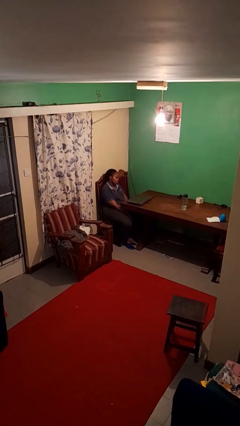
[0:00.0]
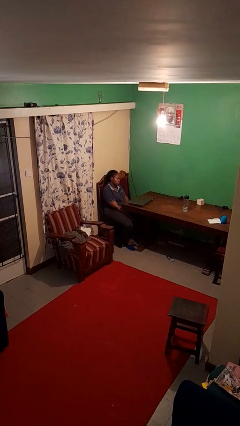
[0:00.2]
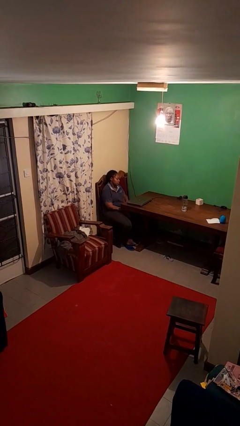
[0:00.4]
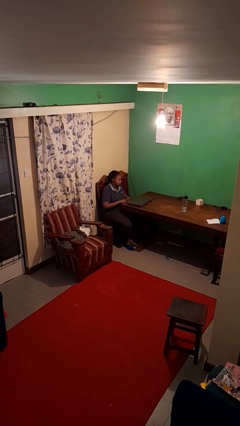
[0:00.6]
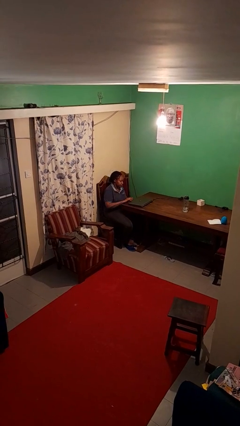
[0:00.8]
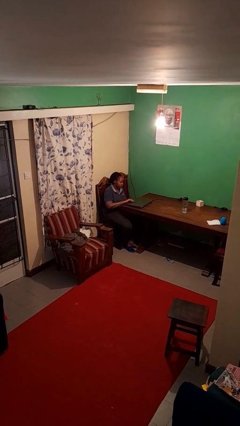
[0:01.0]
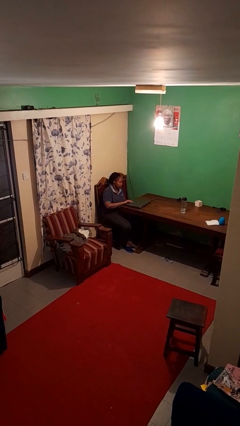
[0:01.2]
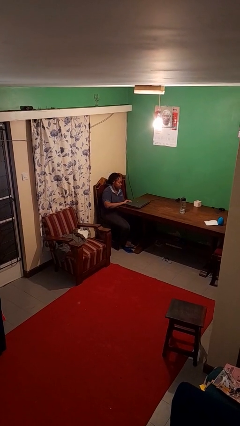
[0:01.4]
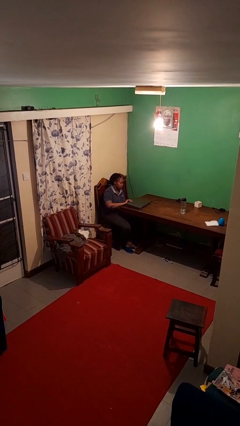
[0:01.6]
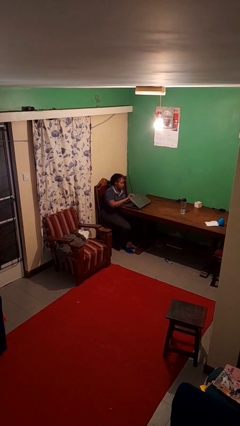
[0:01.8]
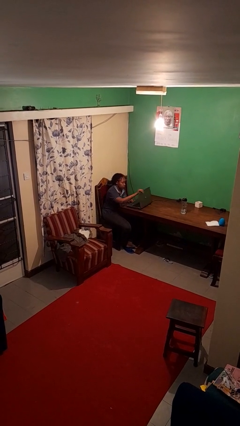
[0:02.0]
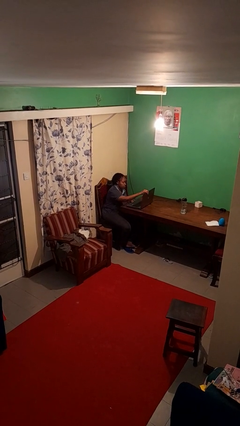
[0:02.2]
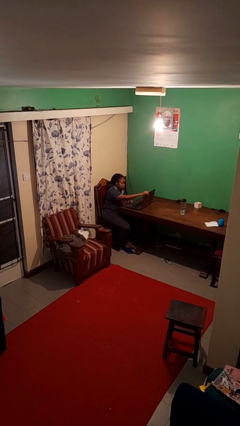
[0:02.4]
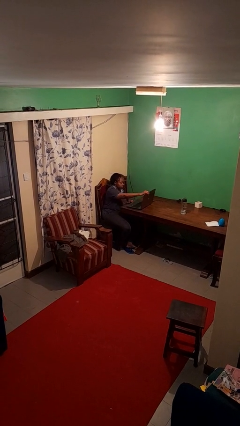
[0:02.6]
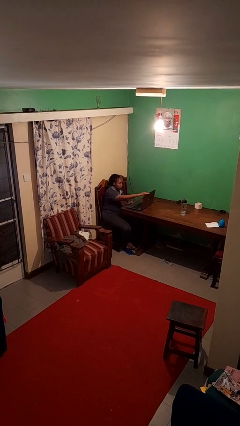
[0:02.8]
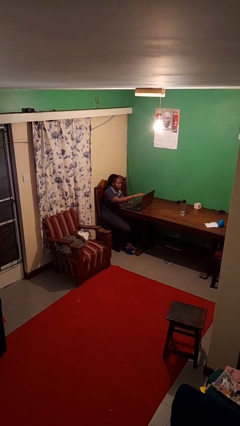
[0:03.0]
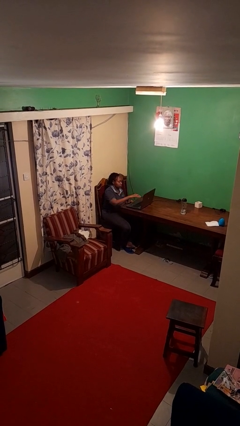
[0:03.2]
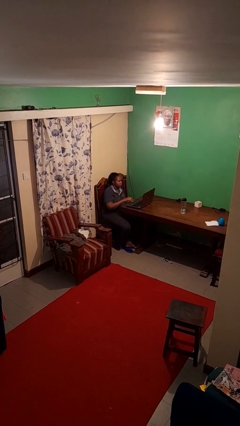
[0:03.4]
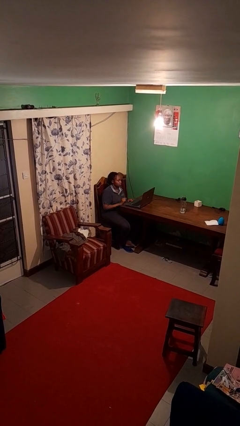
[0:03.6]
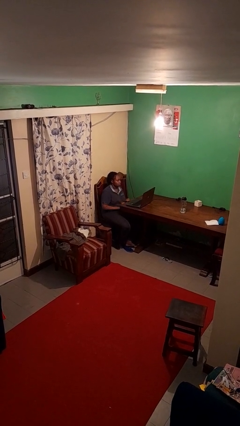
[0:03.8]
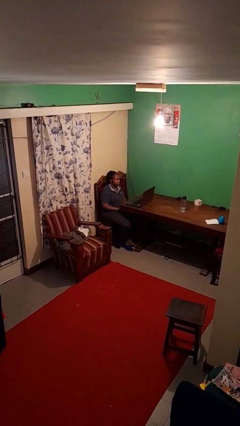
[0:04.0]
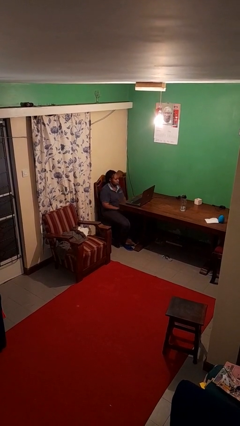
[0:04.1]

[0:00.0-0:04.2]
person opens laptop

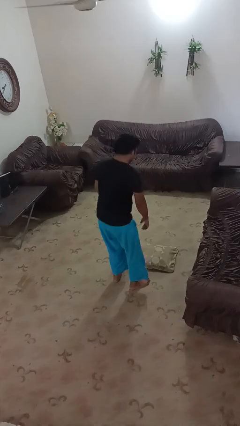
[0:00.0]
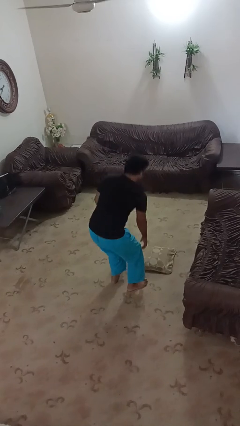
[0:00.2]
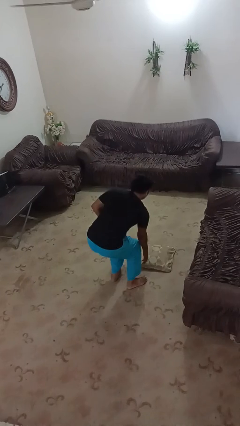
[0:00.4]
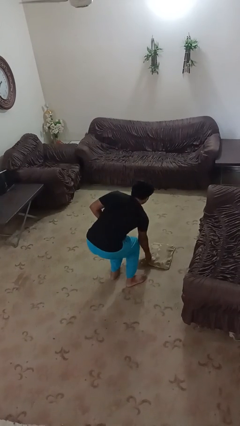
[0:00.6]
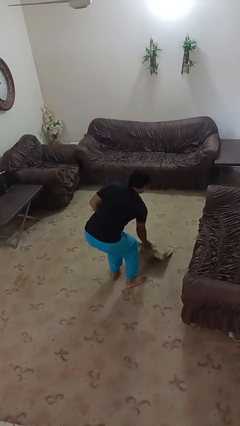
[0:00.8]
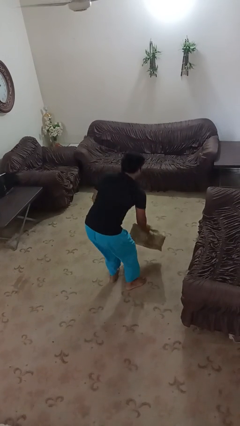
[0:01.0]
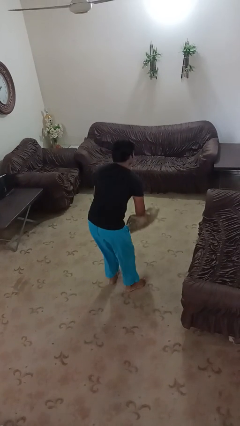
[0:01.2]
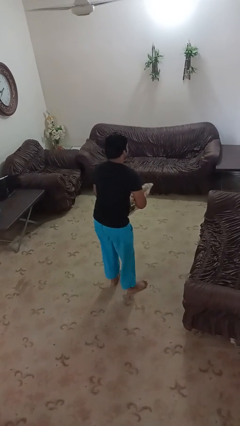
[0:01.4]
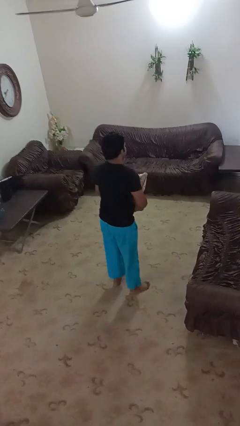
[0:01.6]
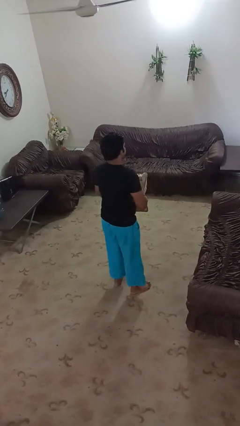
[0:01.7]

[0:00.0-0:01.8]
person picks up object from floor

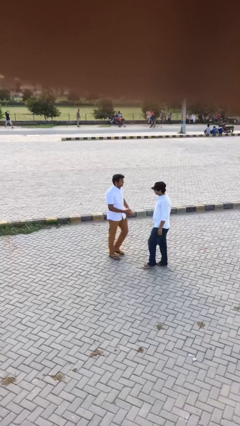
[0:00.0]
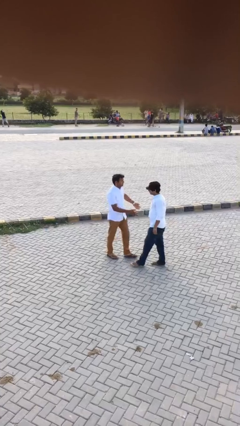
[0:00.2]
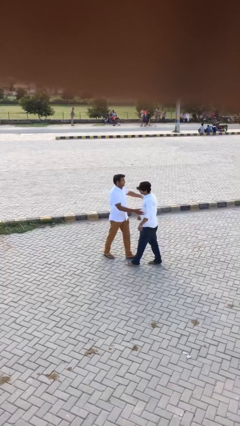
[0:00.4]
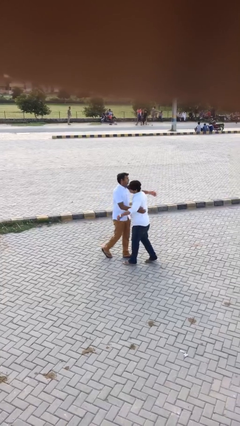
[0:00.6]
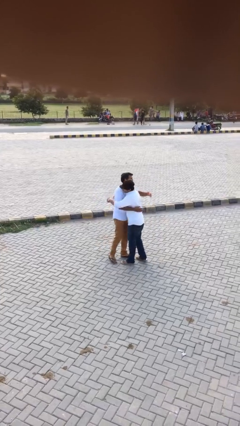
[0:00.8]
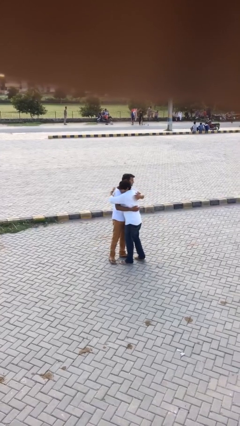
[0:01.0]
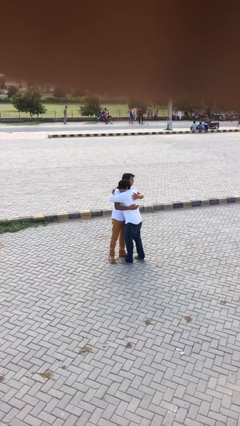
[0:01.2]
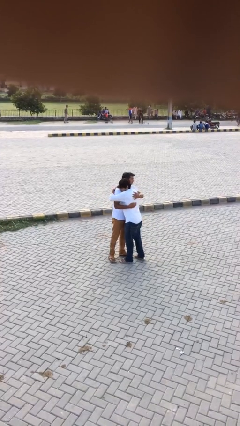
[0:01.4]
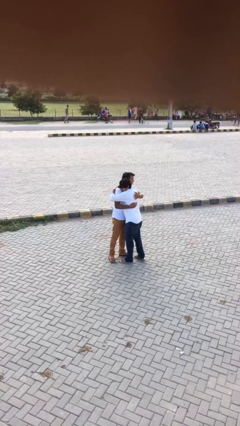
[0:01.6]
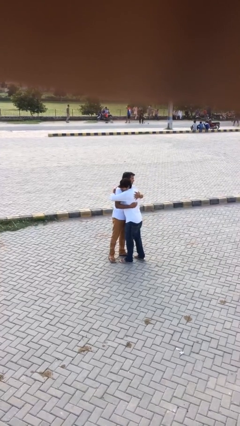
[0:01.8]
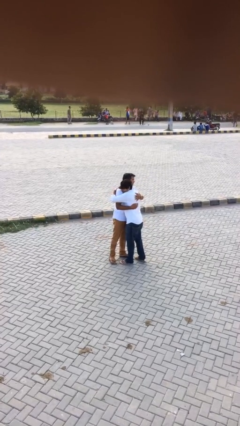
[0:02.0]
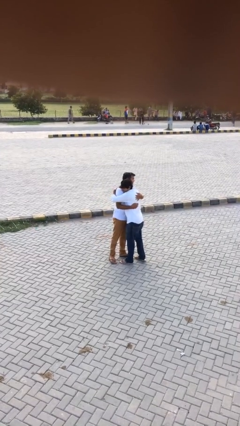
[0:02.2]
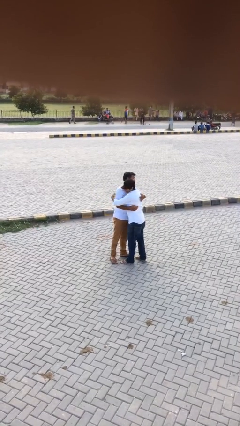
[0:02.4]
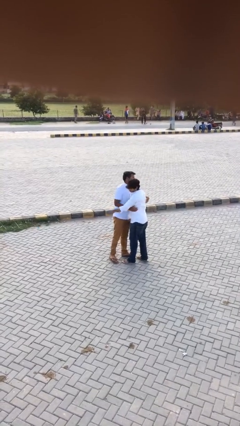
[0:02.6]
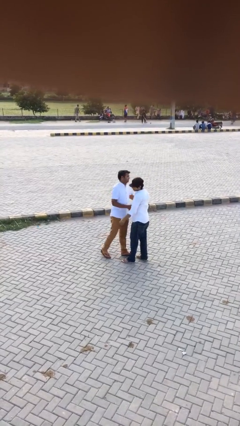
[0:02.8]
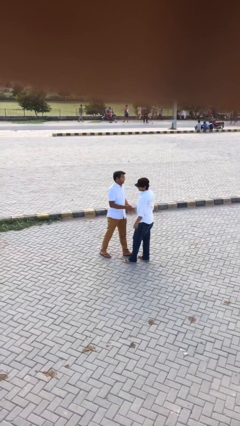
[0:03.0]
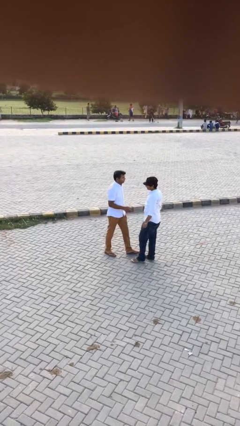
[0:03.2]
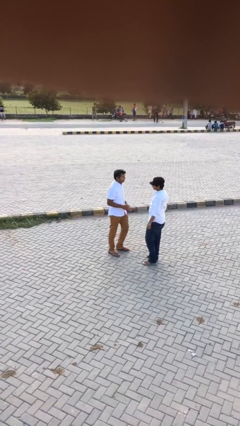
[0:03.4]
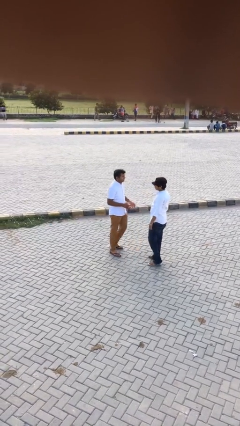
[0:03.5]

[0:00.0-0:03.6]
person embraces person

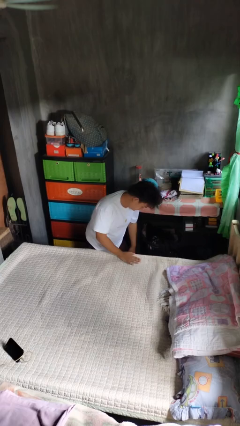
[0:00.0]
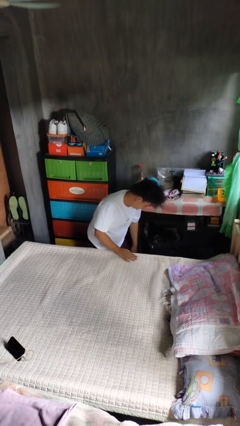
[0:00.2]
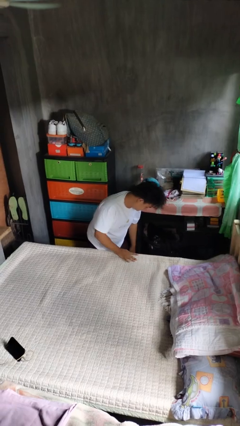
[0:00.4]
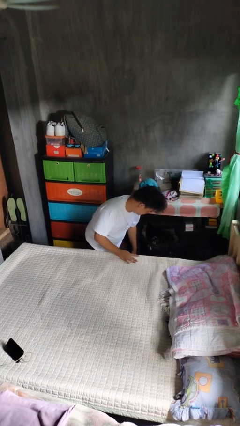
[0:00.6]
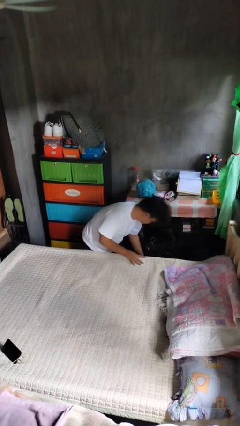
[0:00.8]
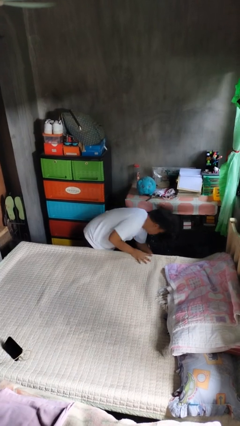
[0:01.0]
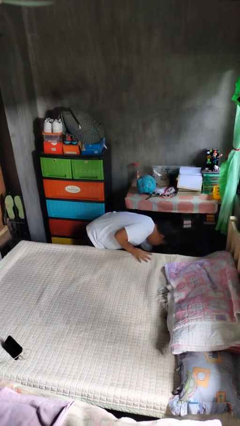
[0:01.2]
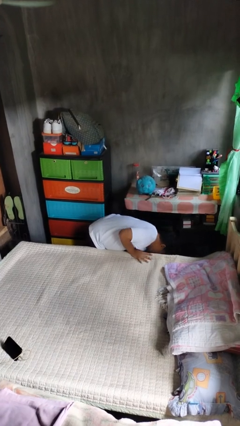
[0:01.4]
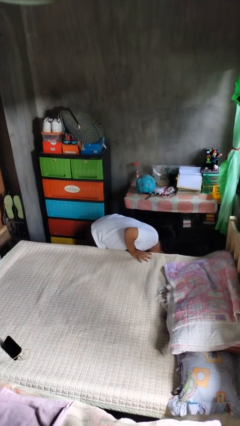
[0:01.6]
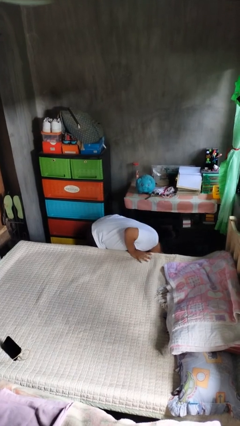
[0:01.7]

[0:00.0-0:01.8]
person searches under bed

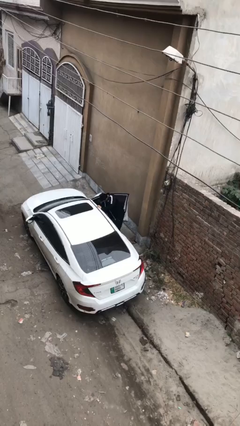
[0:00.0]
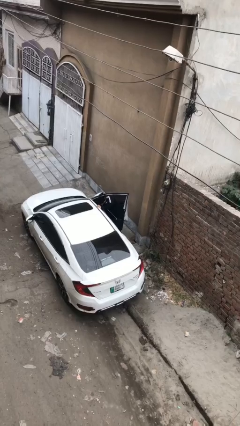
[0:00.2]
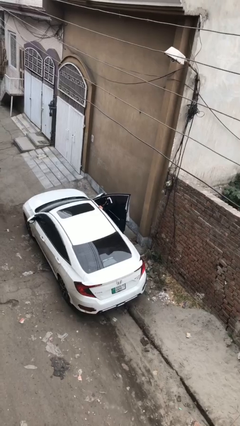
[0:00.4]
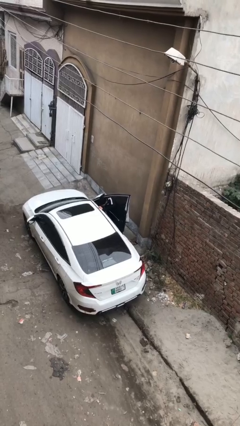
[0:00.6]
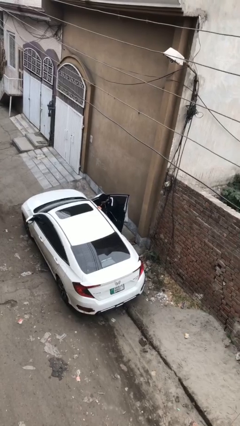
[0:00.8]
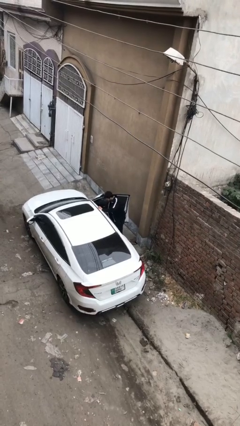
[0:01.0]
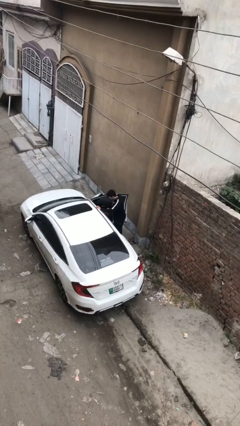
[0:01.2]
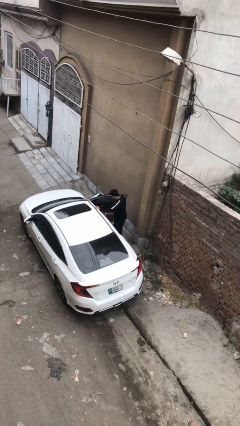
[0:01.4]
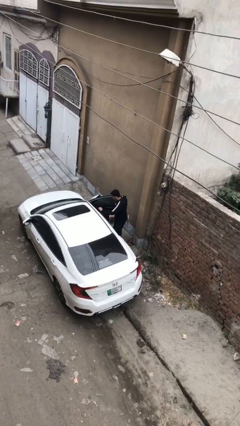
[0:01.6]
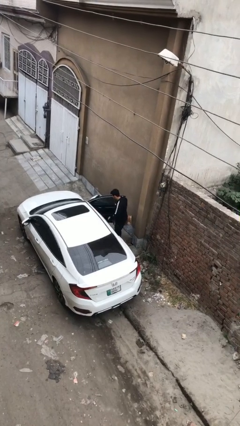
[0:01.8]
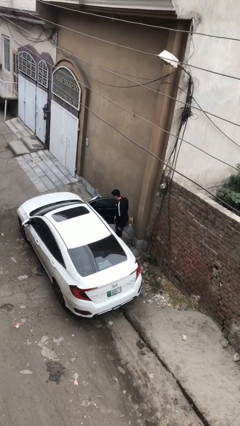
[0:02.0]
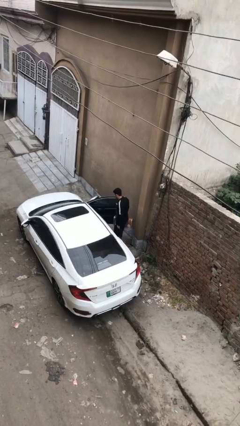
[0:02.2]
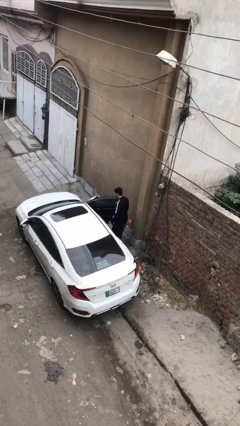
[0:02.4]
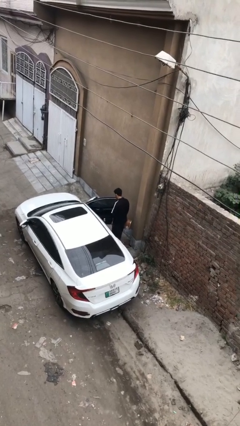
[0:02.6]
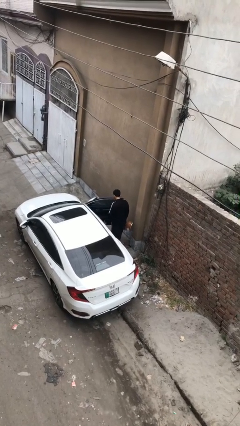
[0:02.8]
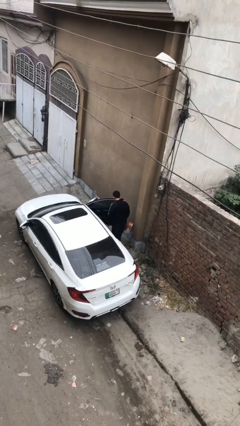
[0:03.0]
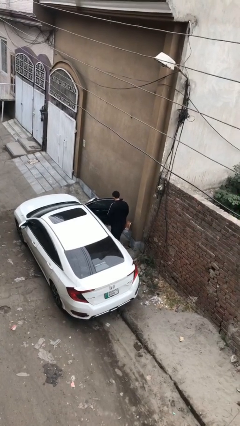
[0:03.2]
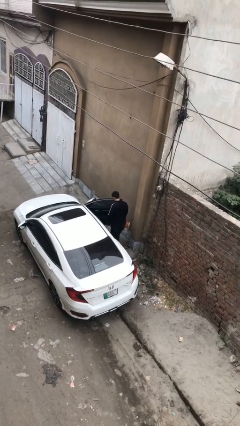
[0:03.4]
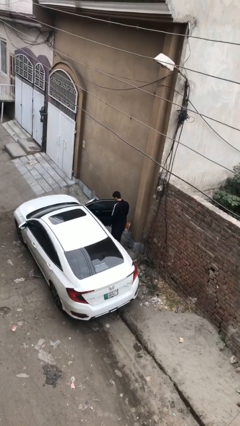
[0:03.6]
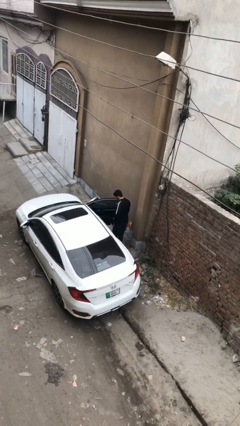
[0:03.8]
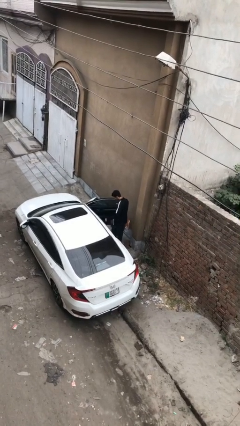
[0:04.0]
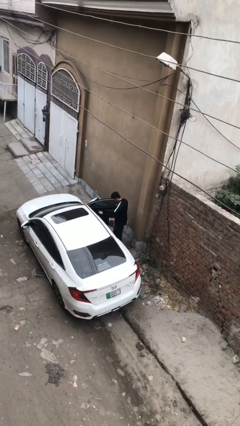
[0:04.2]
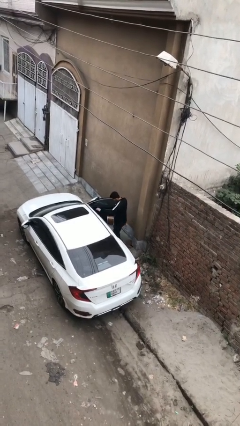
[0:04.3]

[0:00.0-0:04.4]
person unloads car

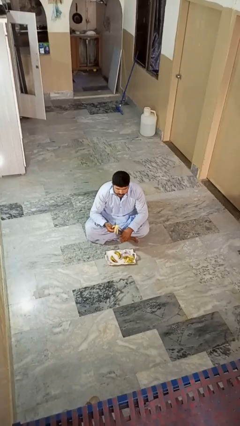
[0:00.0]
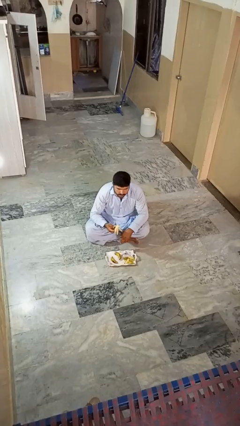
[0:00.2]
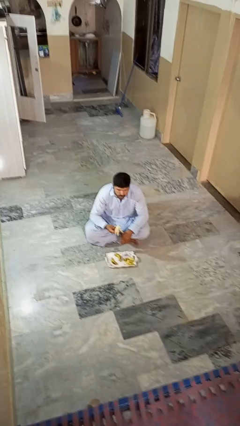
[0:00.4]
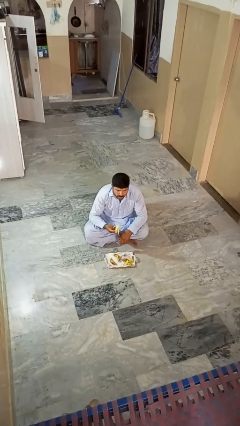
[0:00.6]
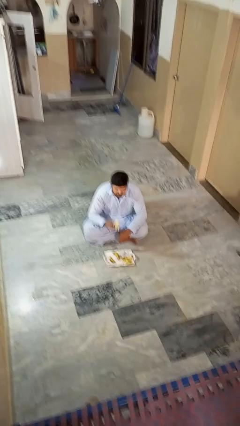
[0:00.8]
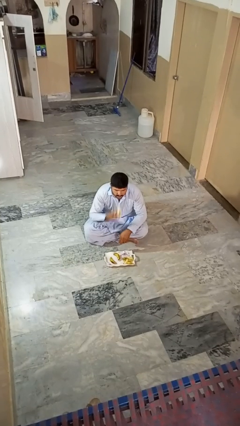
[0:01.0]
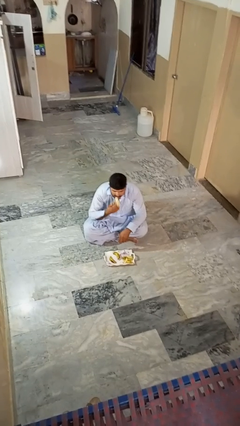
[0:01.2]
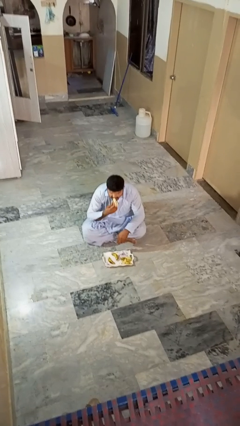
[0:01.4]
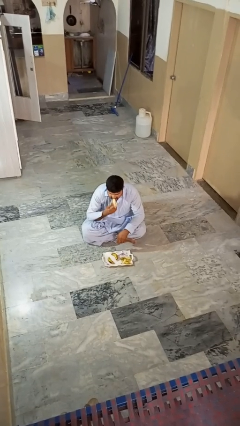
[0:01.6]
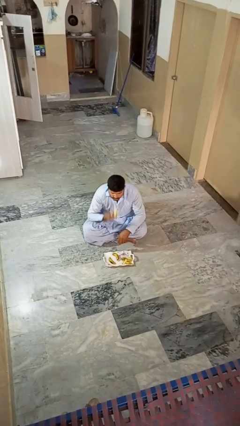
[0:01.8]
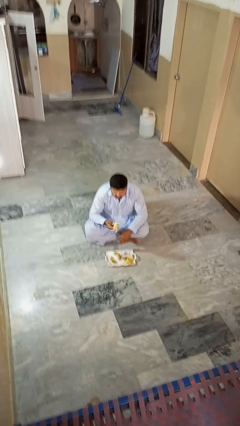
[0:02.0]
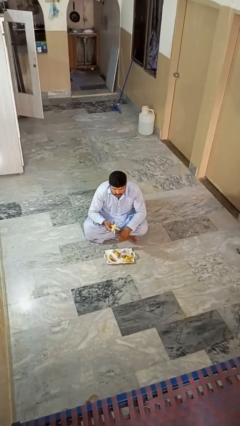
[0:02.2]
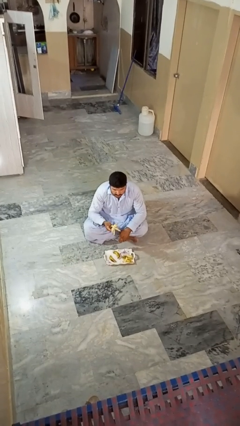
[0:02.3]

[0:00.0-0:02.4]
person eats banana
